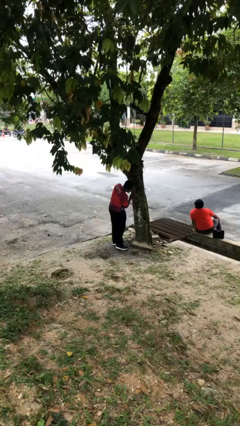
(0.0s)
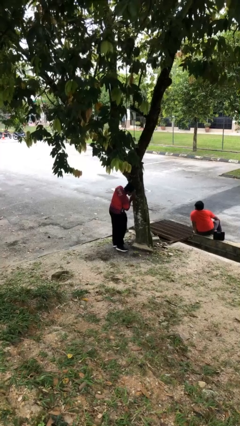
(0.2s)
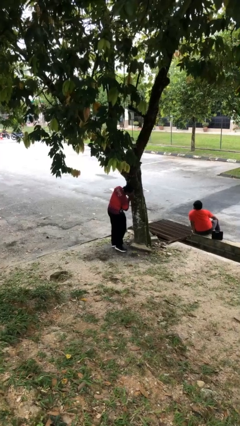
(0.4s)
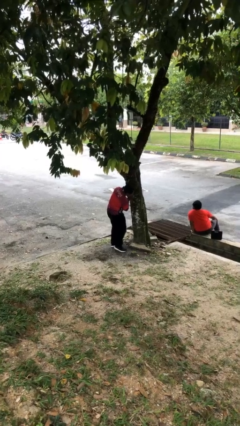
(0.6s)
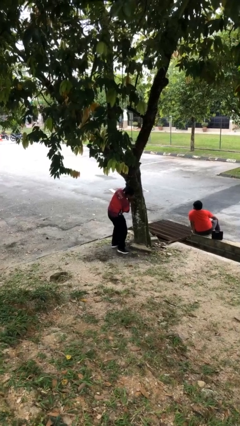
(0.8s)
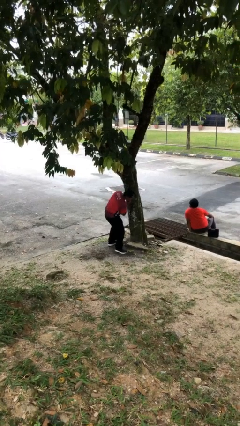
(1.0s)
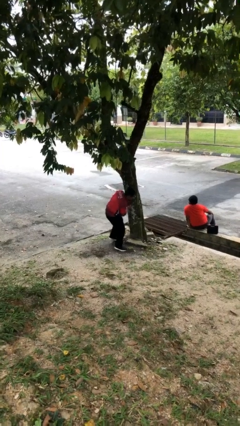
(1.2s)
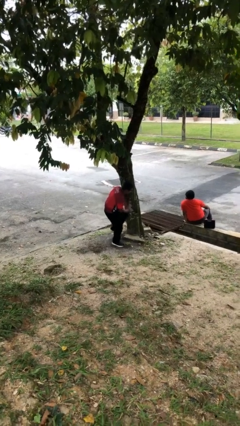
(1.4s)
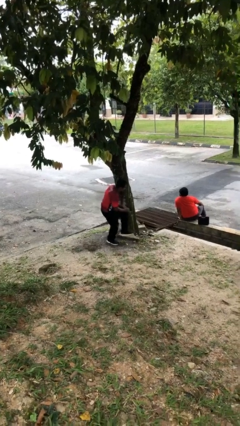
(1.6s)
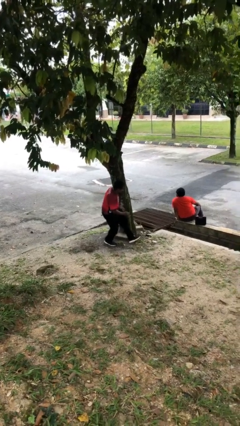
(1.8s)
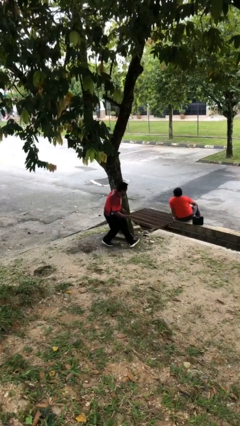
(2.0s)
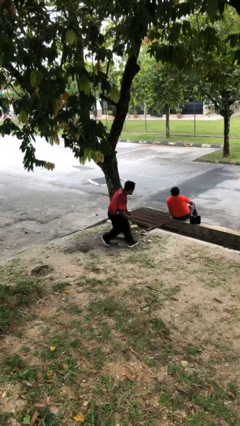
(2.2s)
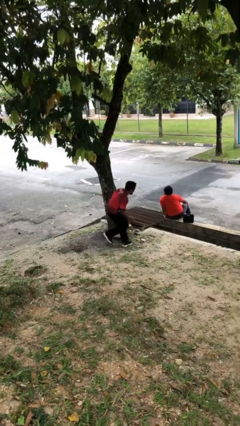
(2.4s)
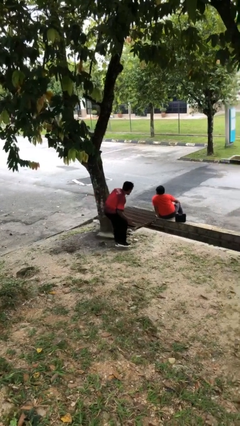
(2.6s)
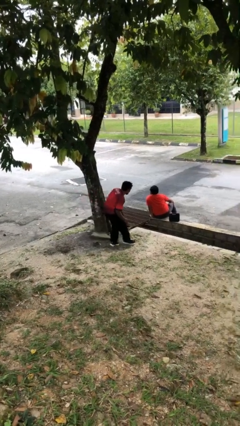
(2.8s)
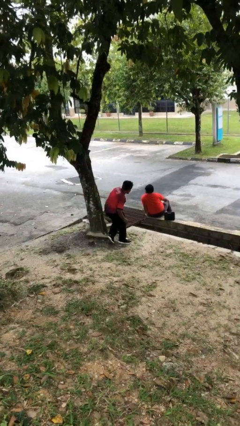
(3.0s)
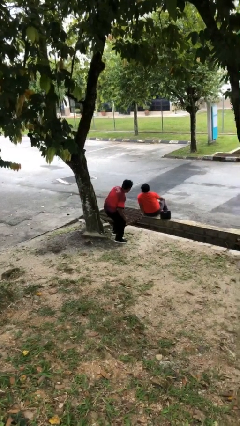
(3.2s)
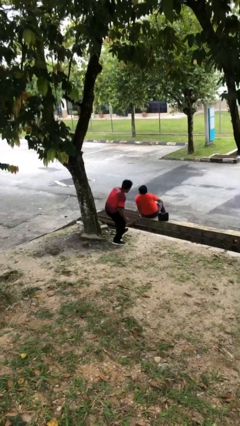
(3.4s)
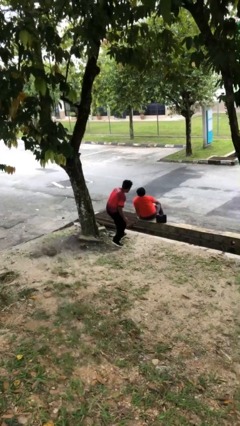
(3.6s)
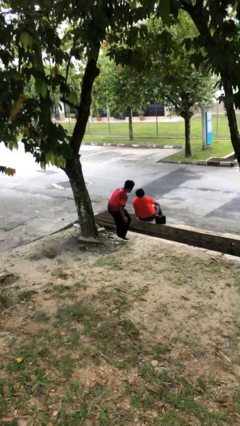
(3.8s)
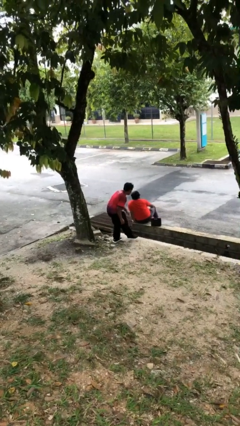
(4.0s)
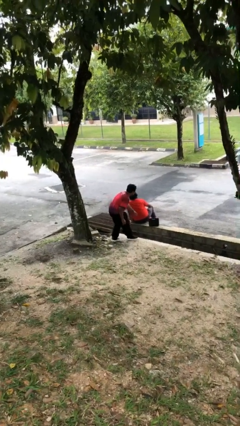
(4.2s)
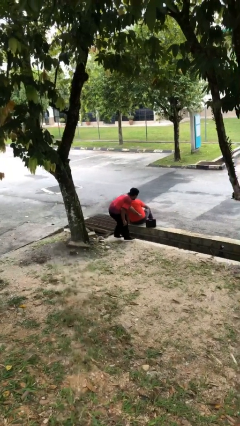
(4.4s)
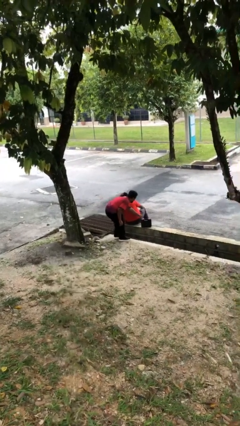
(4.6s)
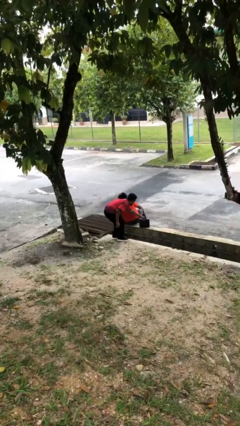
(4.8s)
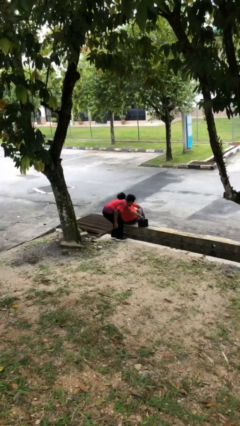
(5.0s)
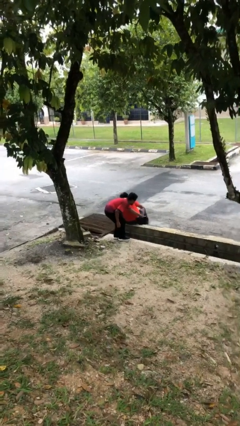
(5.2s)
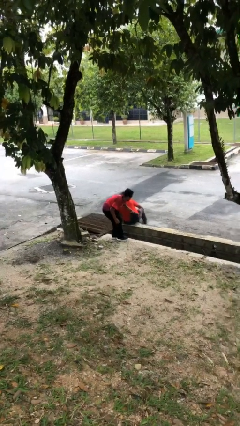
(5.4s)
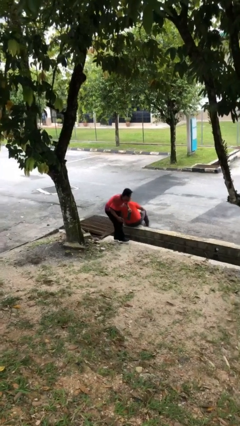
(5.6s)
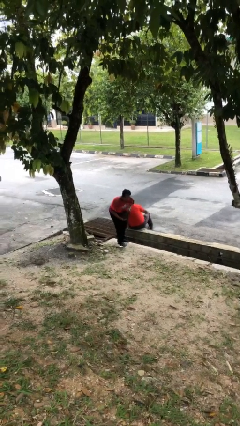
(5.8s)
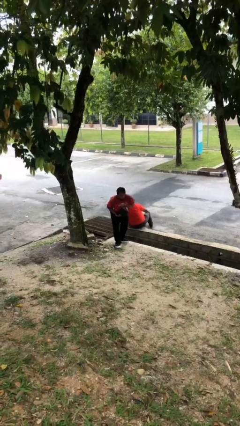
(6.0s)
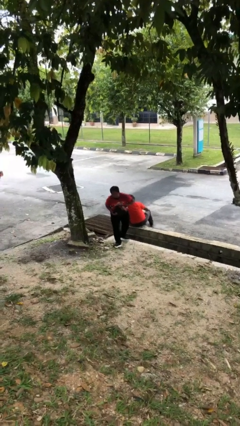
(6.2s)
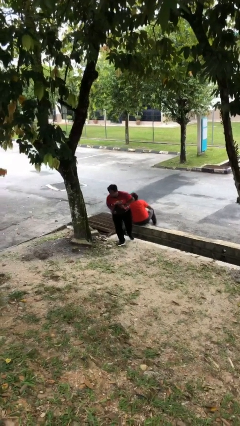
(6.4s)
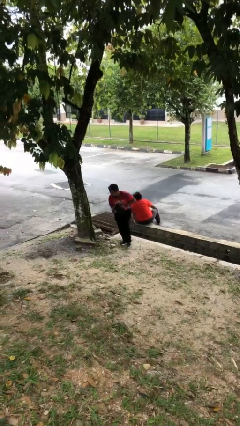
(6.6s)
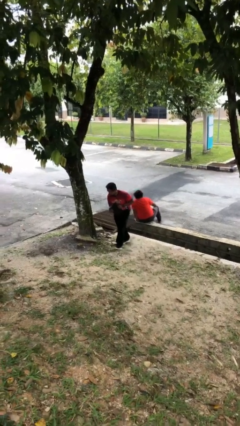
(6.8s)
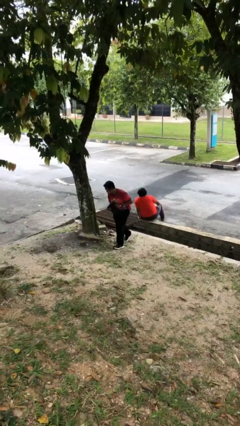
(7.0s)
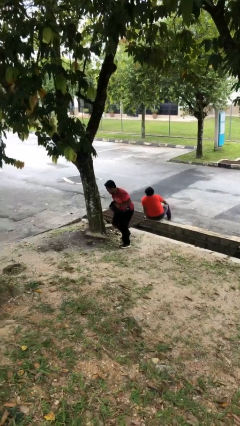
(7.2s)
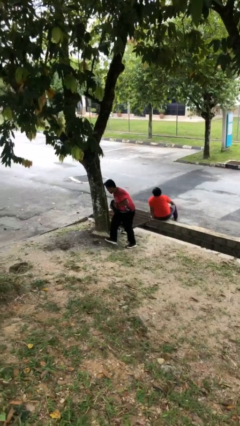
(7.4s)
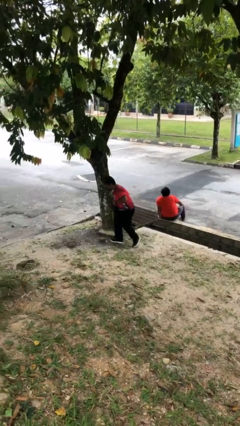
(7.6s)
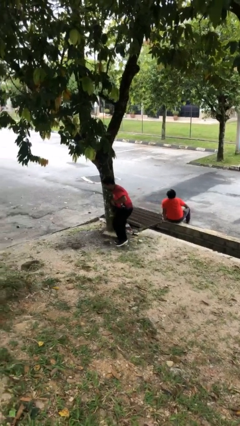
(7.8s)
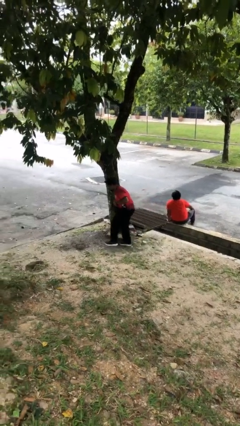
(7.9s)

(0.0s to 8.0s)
person steals object from person

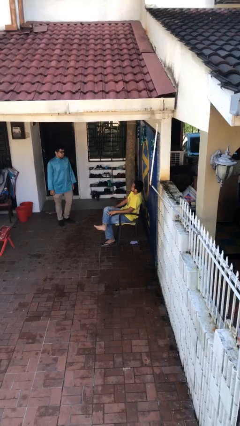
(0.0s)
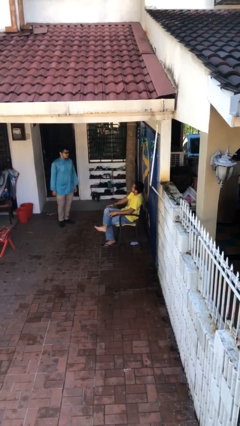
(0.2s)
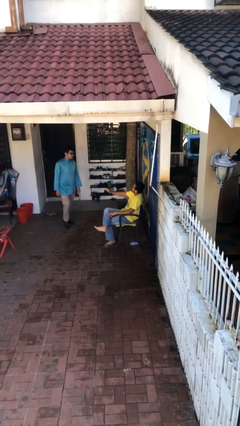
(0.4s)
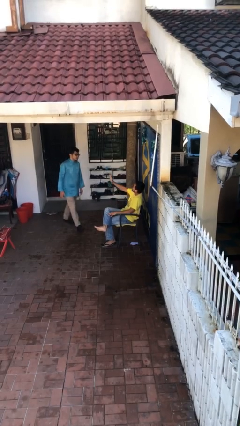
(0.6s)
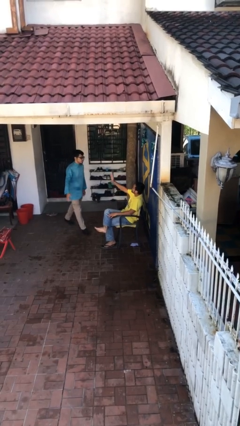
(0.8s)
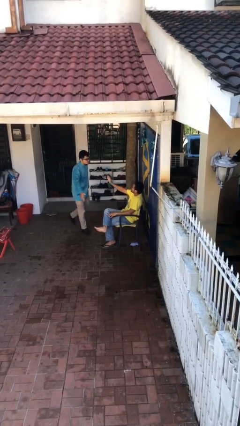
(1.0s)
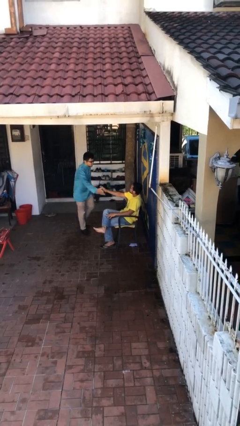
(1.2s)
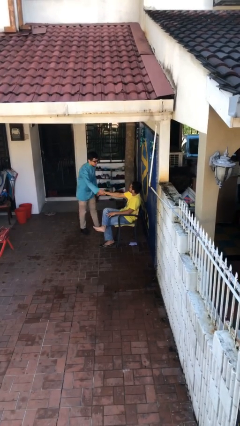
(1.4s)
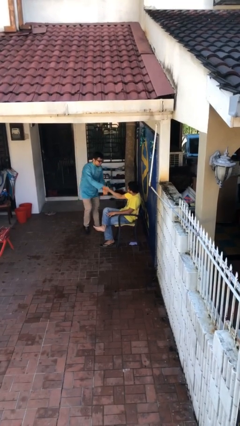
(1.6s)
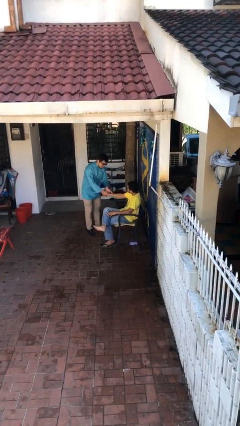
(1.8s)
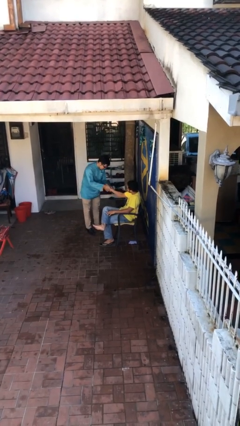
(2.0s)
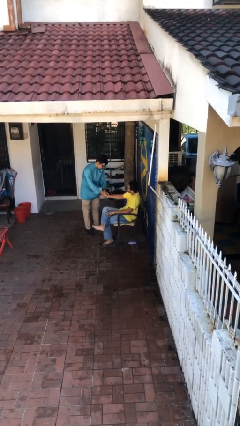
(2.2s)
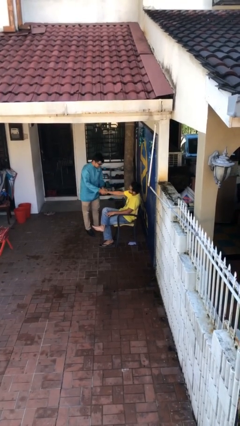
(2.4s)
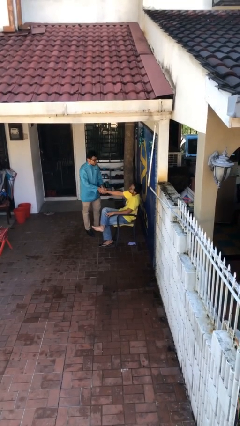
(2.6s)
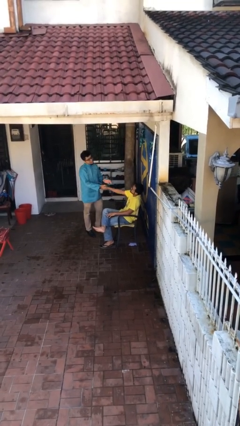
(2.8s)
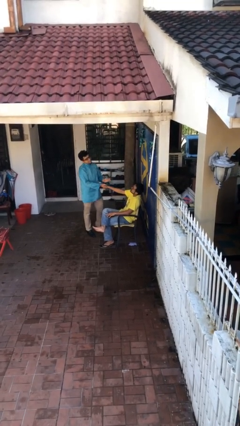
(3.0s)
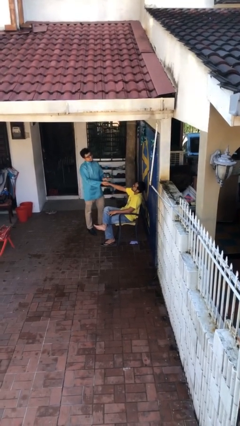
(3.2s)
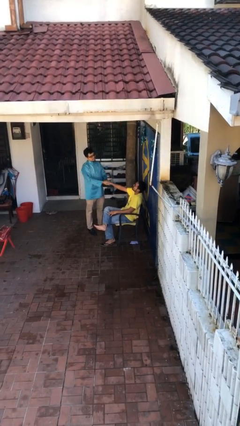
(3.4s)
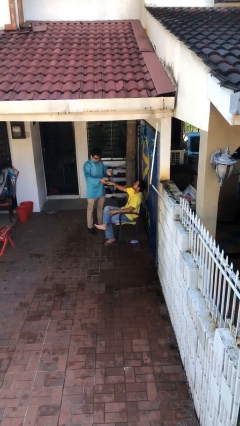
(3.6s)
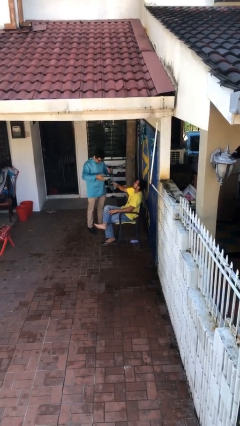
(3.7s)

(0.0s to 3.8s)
person shakes hand

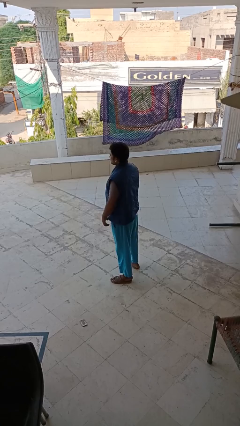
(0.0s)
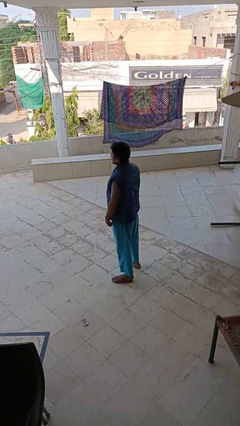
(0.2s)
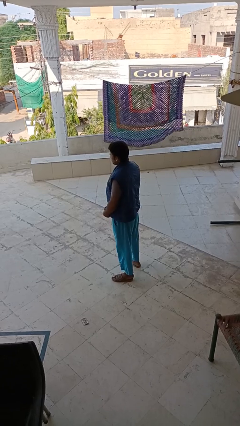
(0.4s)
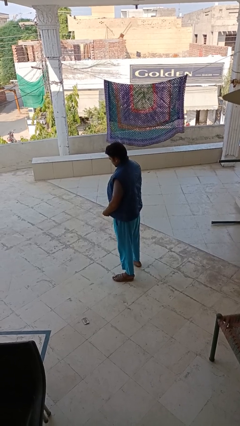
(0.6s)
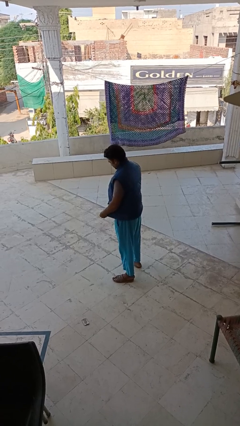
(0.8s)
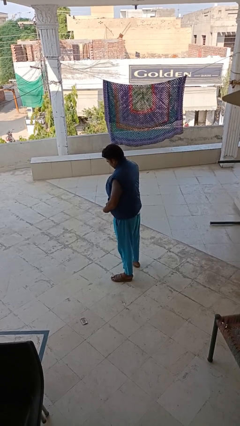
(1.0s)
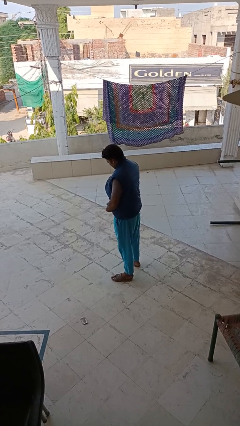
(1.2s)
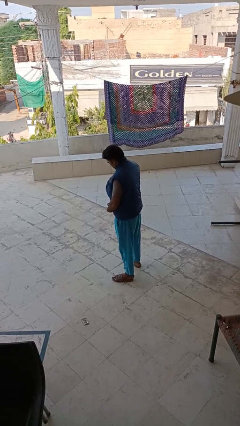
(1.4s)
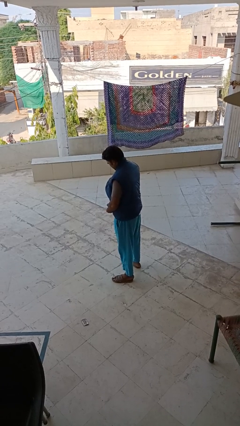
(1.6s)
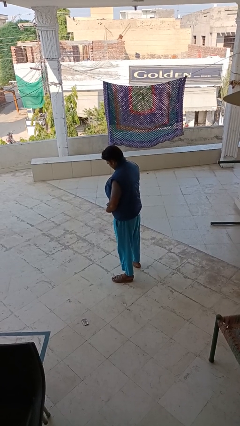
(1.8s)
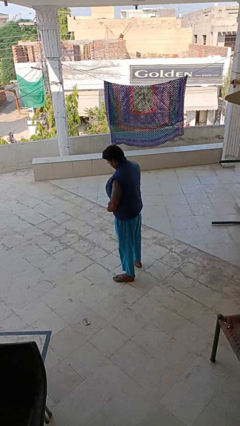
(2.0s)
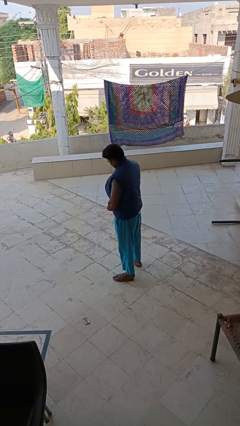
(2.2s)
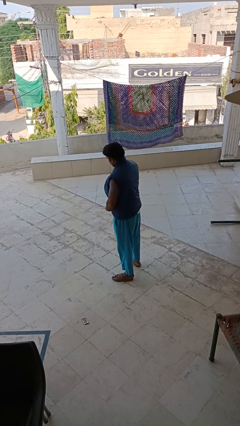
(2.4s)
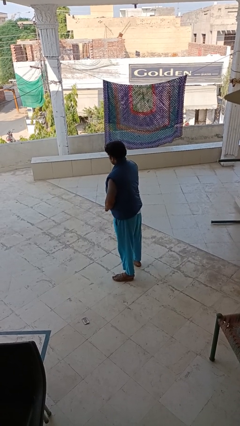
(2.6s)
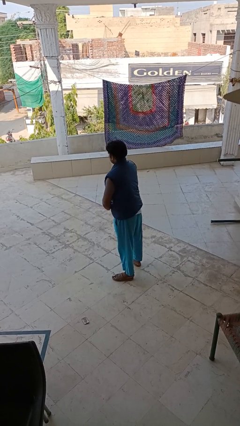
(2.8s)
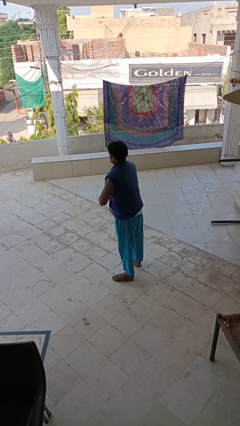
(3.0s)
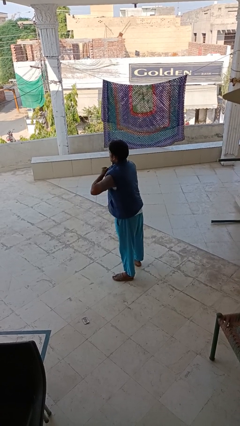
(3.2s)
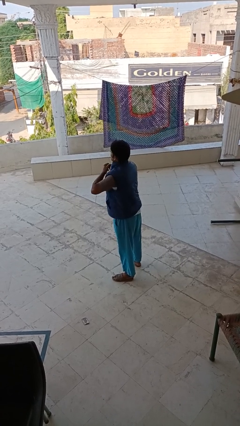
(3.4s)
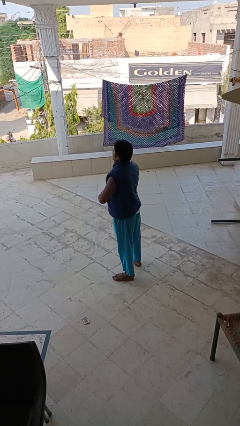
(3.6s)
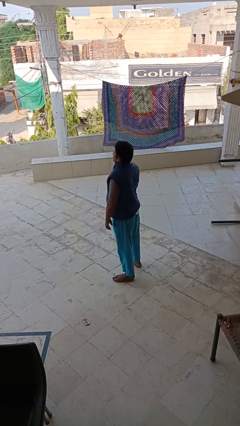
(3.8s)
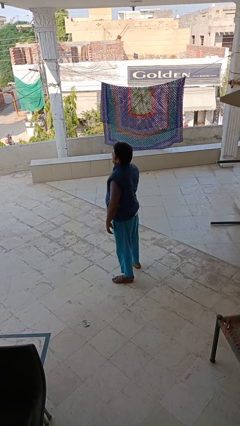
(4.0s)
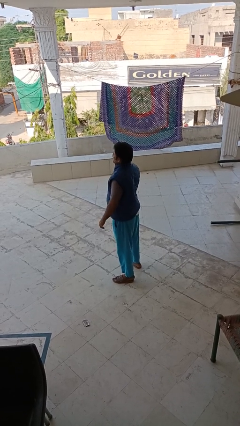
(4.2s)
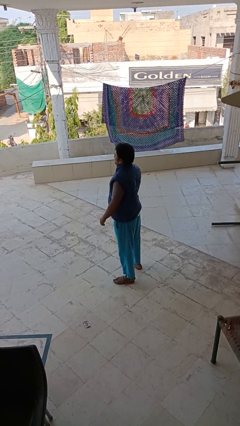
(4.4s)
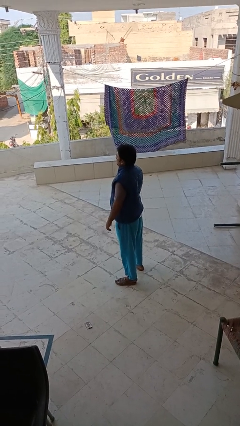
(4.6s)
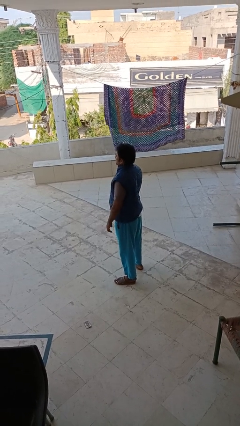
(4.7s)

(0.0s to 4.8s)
person zips up jacket

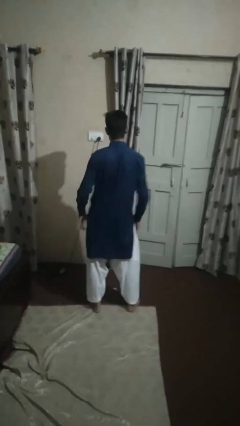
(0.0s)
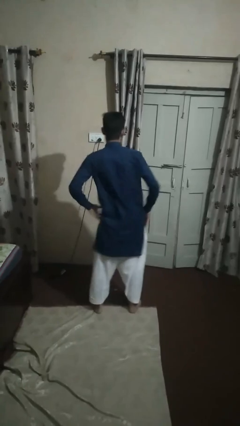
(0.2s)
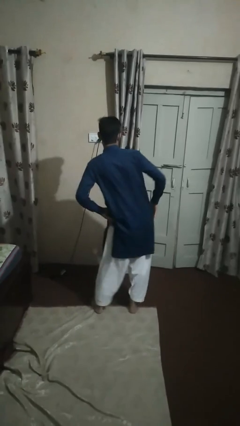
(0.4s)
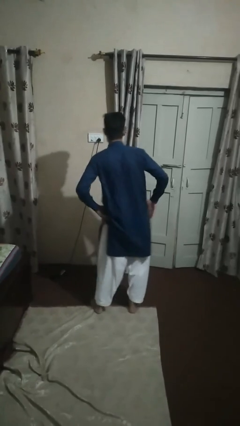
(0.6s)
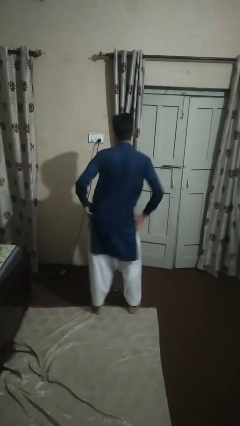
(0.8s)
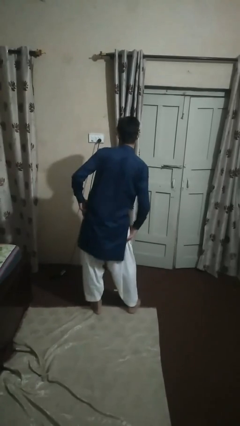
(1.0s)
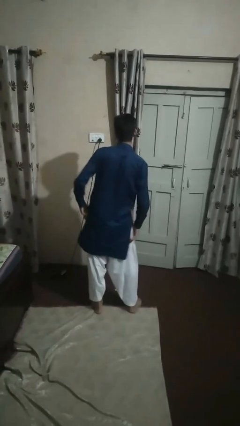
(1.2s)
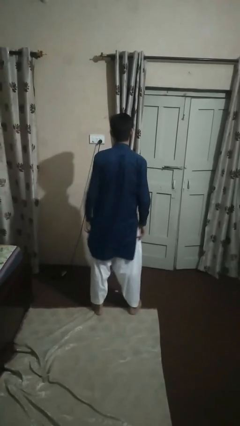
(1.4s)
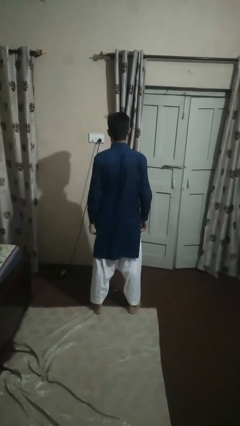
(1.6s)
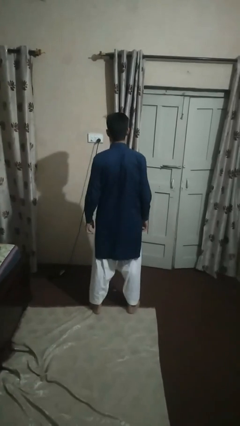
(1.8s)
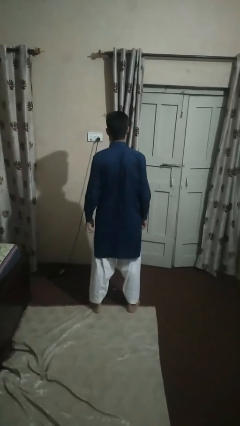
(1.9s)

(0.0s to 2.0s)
person wiggles hips
